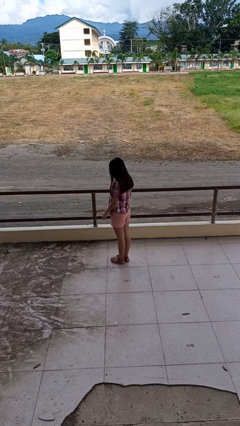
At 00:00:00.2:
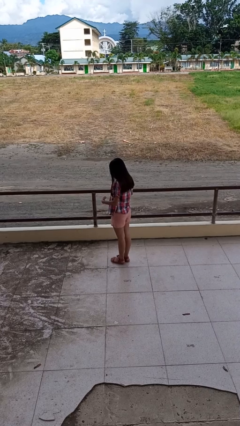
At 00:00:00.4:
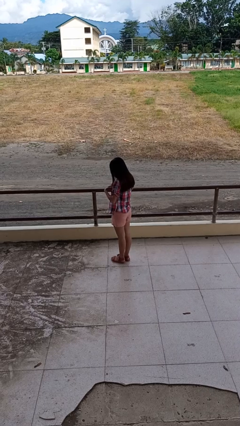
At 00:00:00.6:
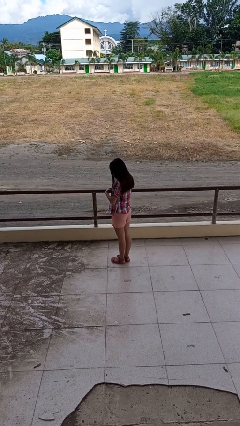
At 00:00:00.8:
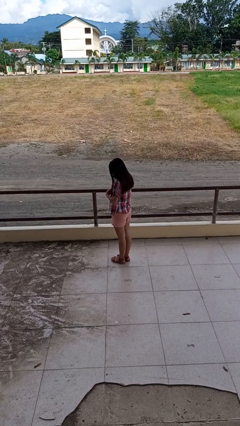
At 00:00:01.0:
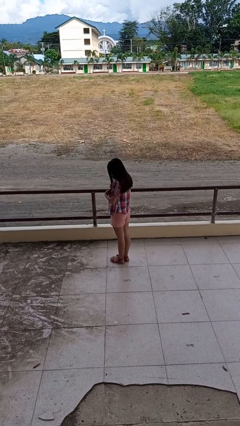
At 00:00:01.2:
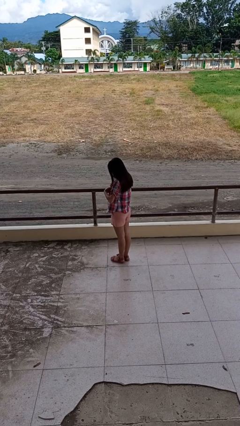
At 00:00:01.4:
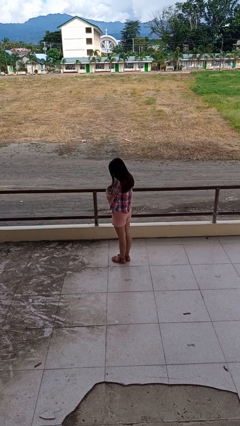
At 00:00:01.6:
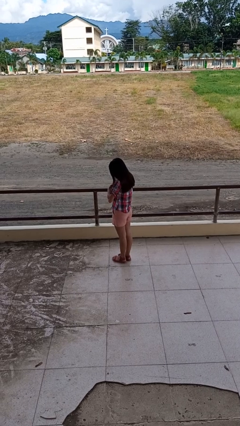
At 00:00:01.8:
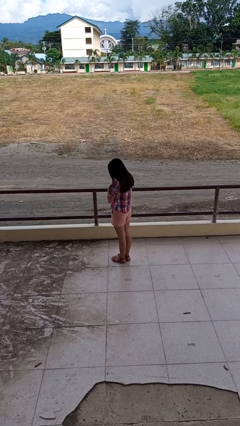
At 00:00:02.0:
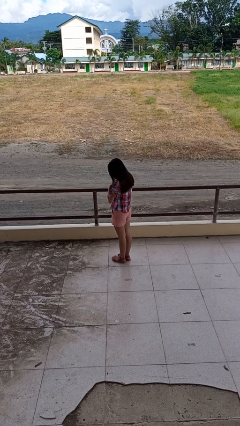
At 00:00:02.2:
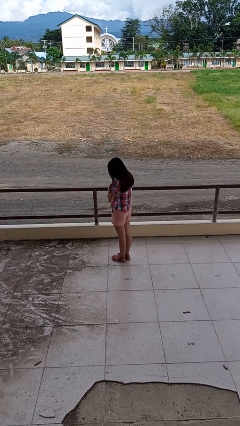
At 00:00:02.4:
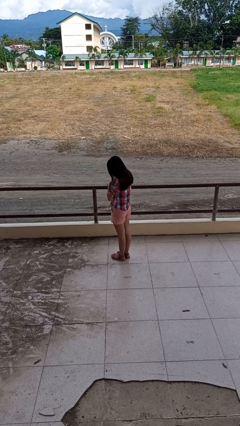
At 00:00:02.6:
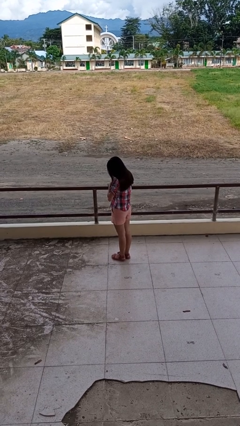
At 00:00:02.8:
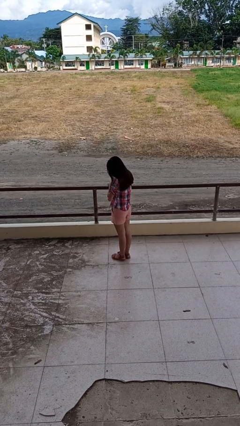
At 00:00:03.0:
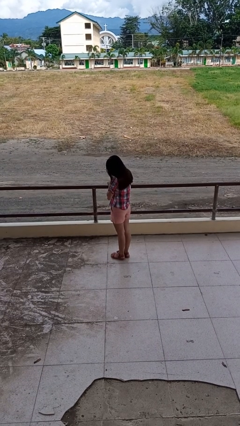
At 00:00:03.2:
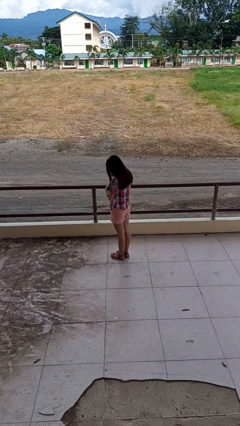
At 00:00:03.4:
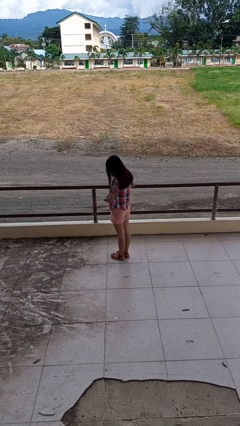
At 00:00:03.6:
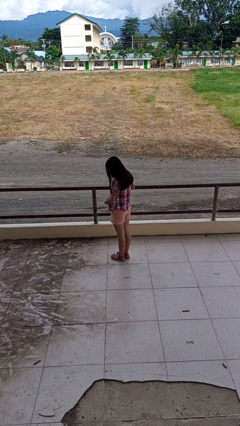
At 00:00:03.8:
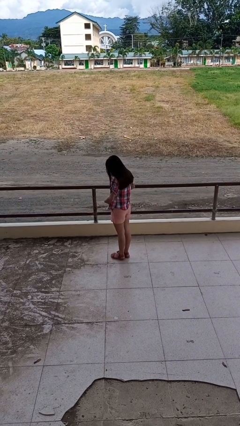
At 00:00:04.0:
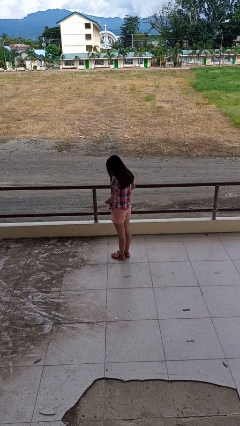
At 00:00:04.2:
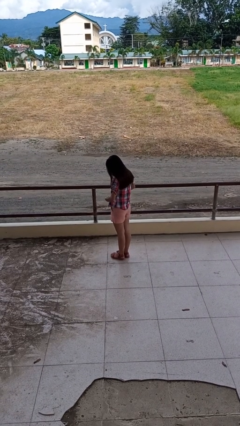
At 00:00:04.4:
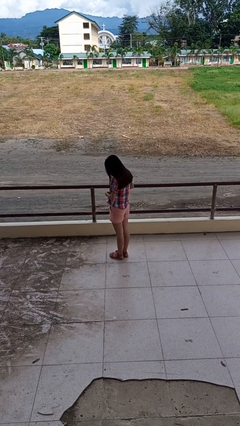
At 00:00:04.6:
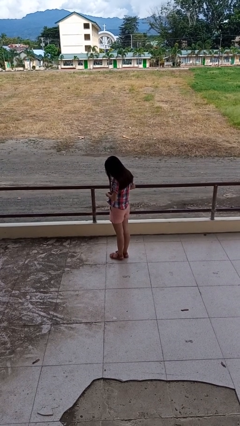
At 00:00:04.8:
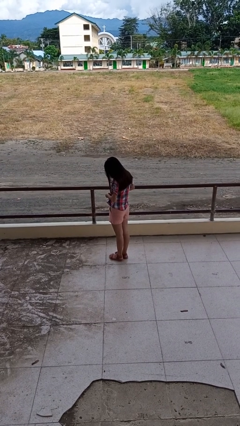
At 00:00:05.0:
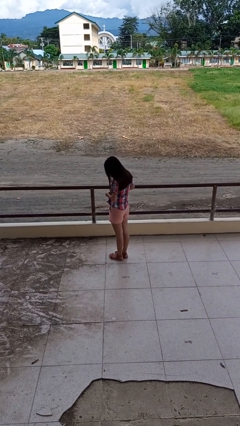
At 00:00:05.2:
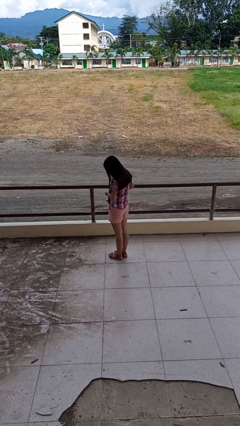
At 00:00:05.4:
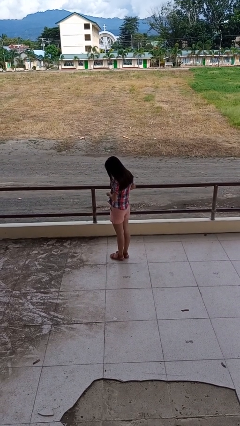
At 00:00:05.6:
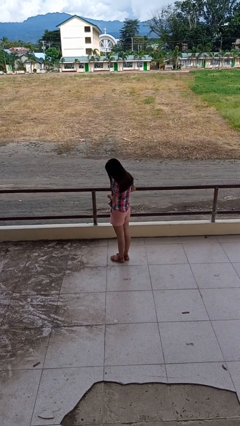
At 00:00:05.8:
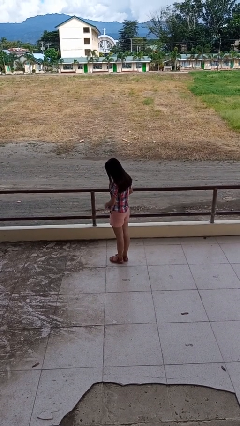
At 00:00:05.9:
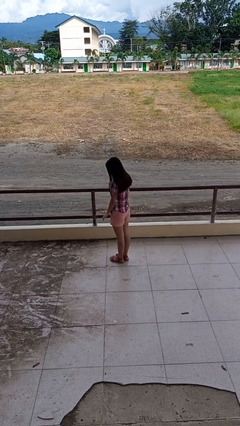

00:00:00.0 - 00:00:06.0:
person buttons shirt

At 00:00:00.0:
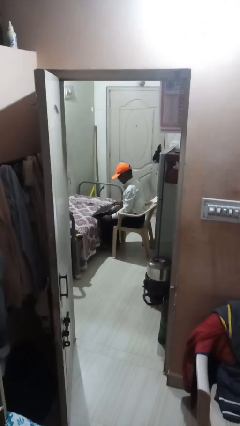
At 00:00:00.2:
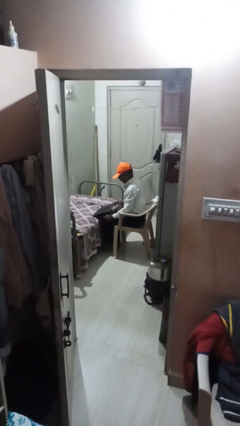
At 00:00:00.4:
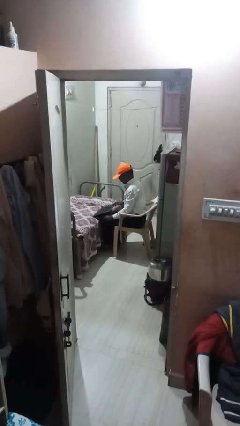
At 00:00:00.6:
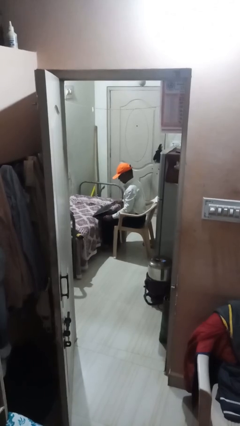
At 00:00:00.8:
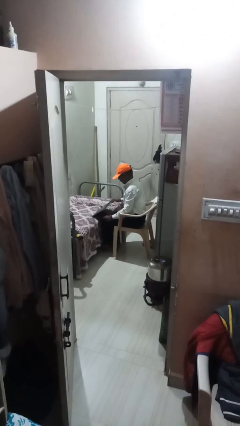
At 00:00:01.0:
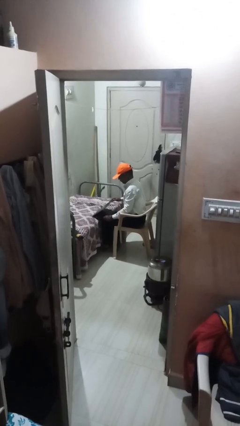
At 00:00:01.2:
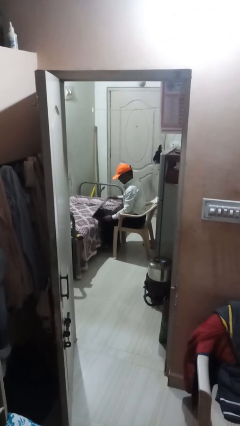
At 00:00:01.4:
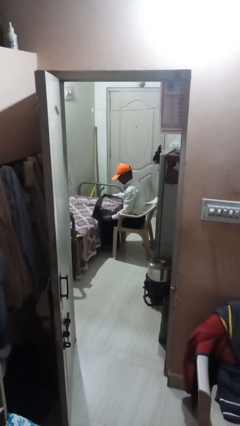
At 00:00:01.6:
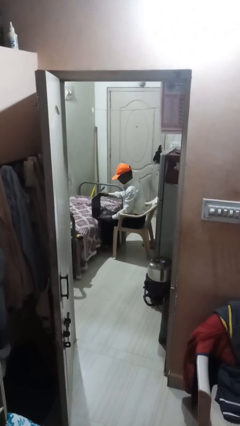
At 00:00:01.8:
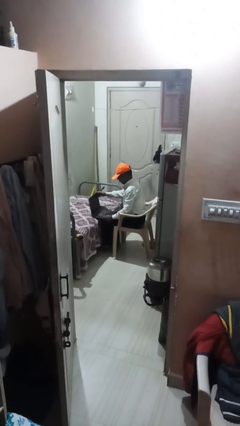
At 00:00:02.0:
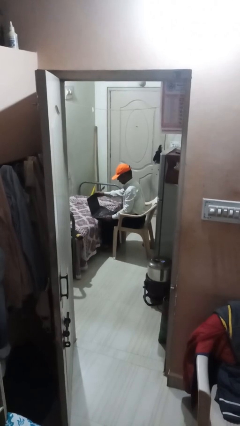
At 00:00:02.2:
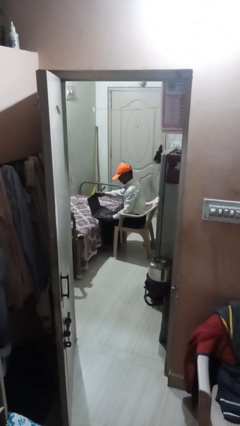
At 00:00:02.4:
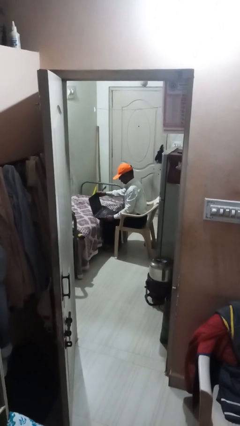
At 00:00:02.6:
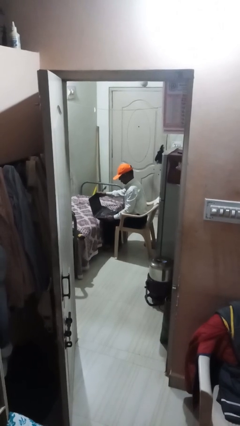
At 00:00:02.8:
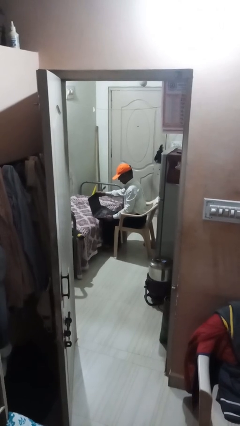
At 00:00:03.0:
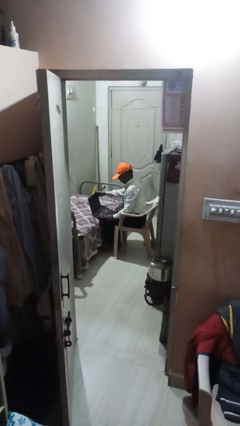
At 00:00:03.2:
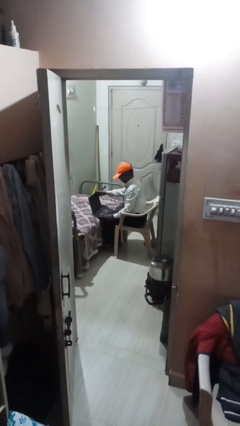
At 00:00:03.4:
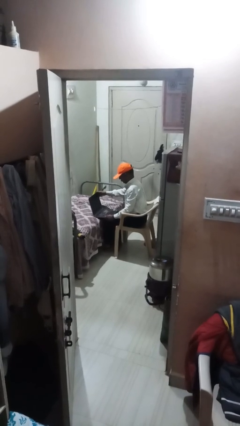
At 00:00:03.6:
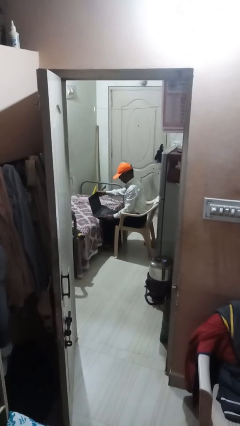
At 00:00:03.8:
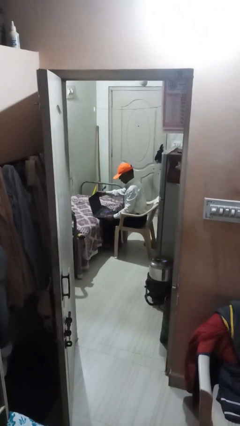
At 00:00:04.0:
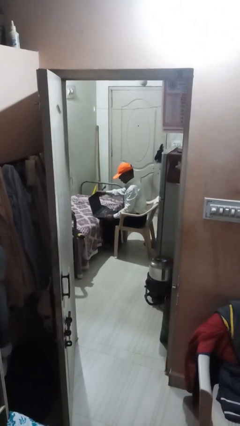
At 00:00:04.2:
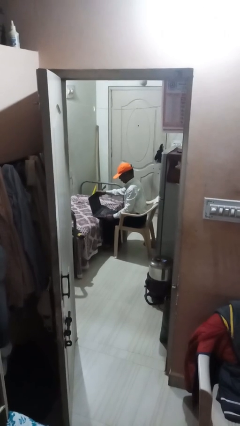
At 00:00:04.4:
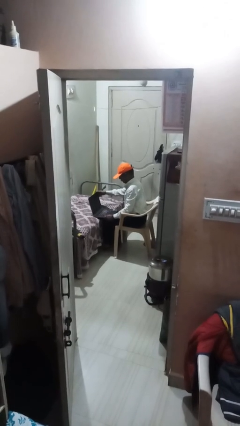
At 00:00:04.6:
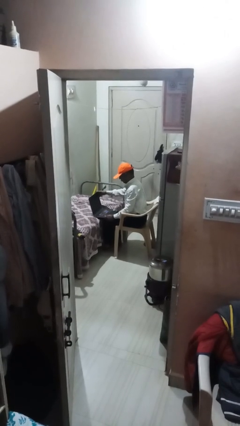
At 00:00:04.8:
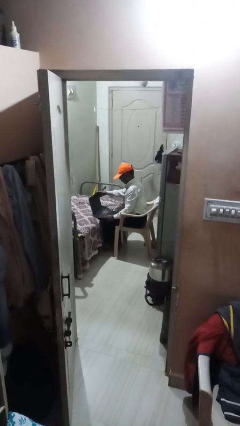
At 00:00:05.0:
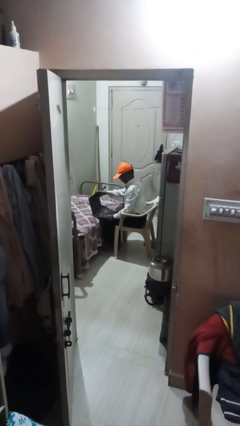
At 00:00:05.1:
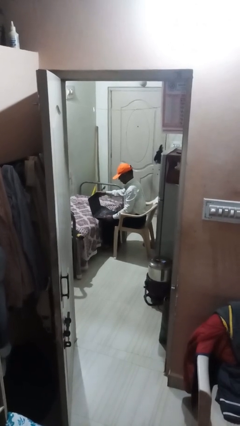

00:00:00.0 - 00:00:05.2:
person interacts with laptop

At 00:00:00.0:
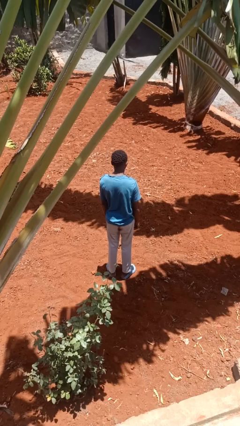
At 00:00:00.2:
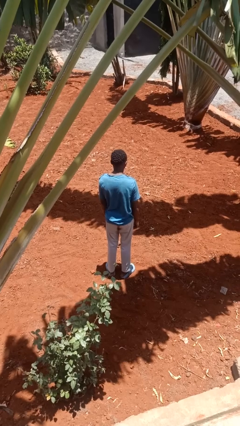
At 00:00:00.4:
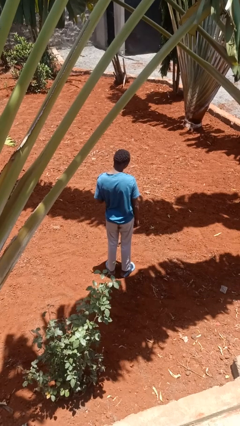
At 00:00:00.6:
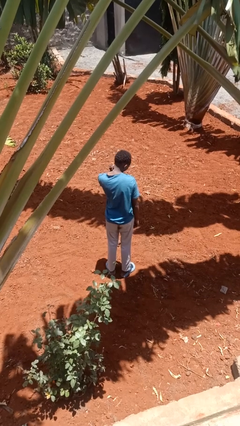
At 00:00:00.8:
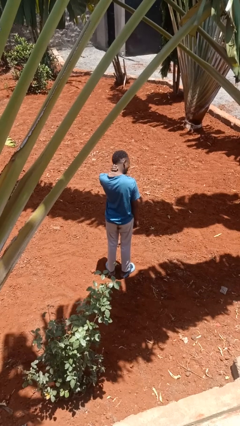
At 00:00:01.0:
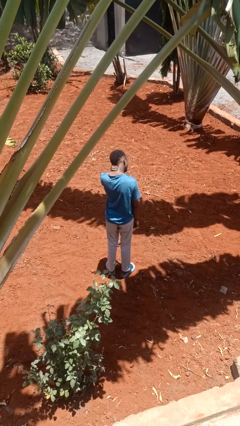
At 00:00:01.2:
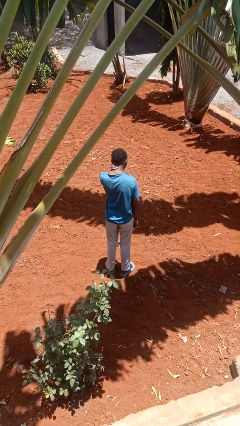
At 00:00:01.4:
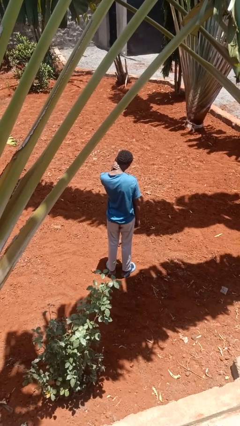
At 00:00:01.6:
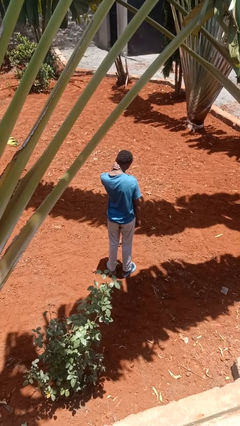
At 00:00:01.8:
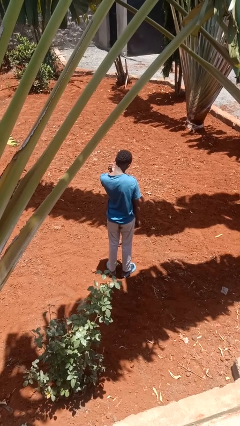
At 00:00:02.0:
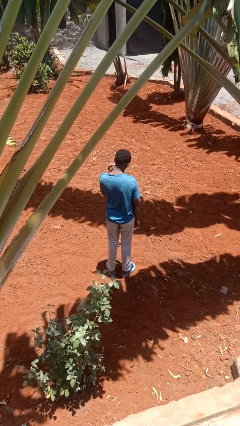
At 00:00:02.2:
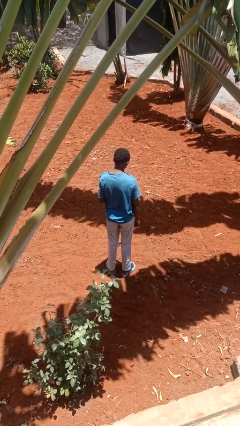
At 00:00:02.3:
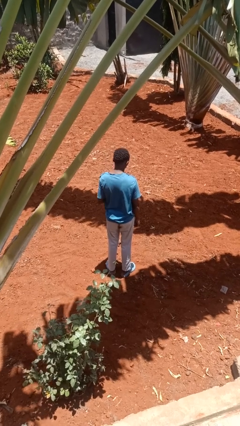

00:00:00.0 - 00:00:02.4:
person rubs neck

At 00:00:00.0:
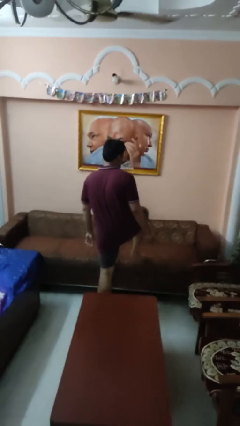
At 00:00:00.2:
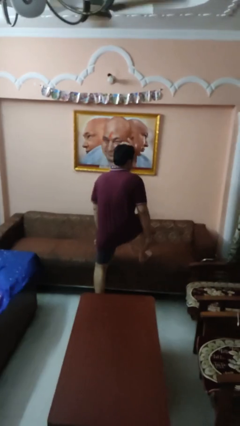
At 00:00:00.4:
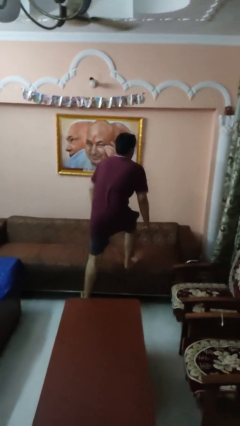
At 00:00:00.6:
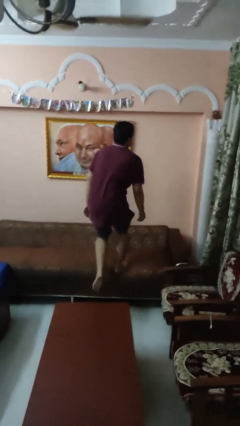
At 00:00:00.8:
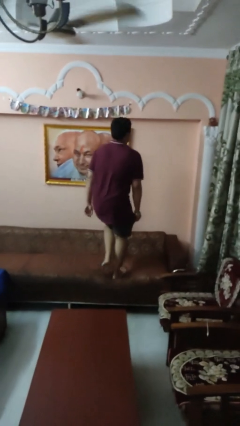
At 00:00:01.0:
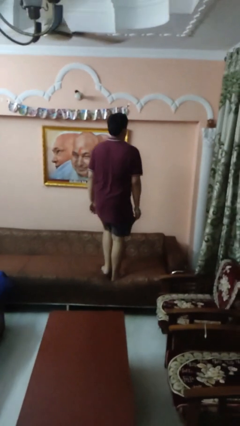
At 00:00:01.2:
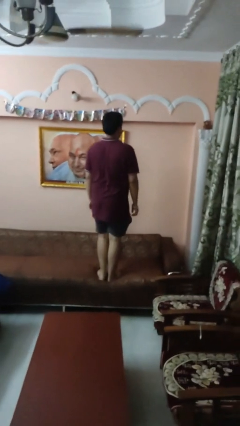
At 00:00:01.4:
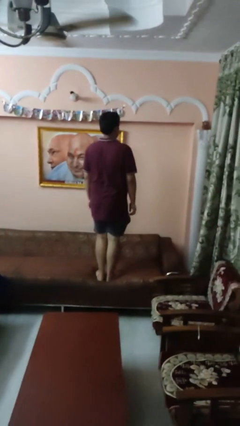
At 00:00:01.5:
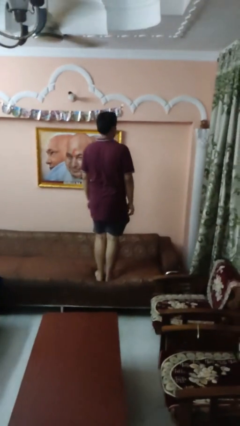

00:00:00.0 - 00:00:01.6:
person climbs on couch

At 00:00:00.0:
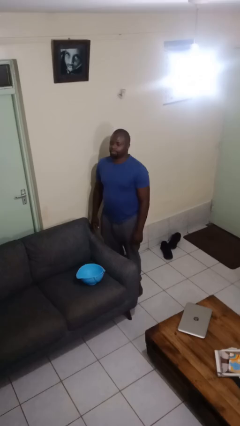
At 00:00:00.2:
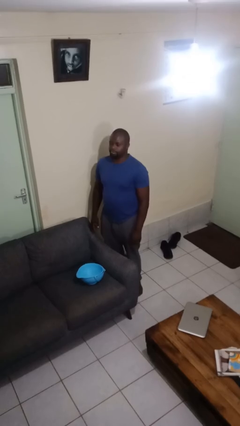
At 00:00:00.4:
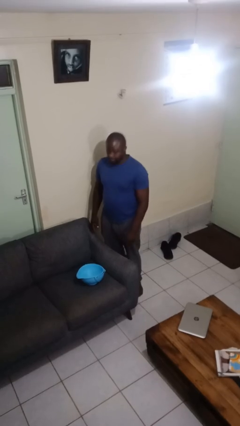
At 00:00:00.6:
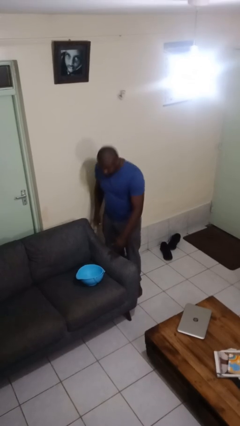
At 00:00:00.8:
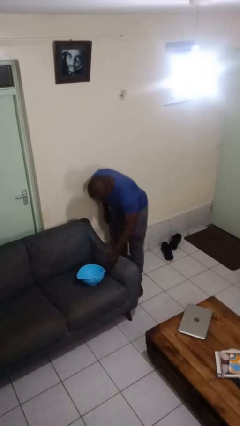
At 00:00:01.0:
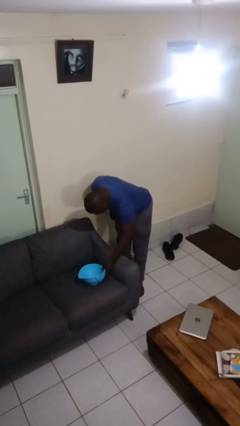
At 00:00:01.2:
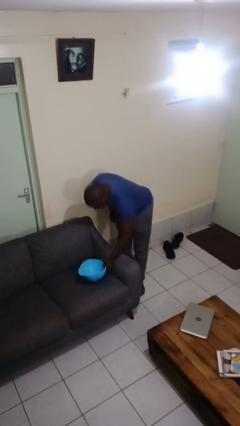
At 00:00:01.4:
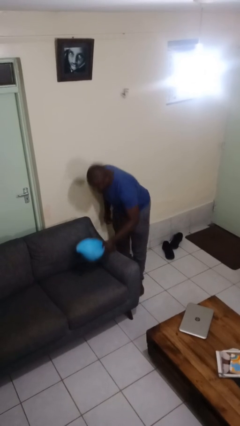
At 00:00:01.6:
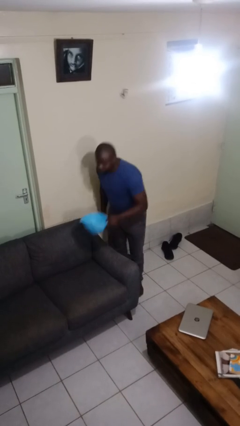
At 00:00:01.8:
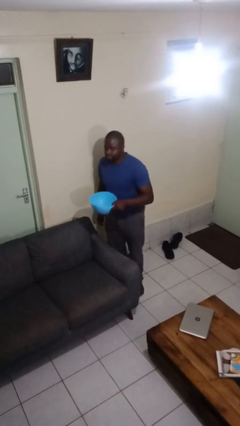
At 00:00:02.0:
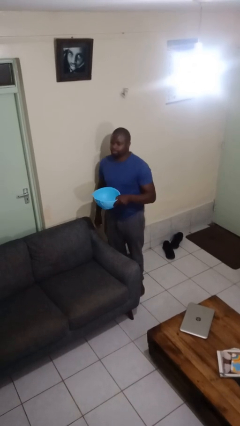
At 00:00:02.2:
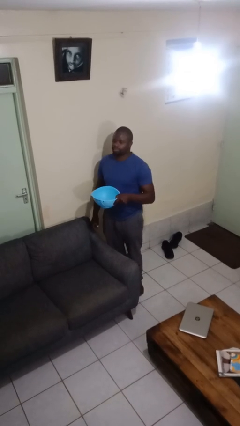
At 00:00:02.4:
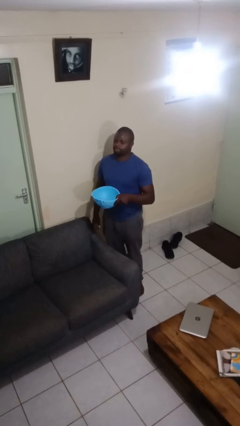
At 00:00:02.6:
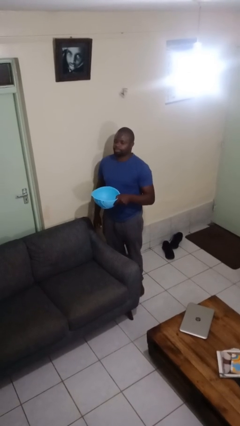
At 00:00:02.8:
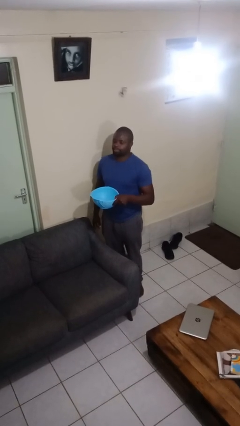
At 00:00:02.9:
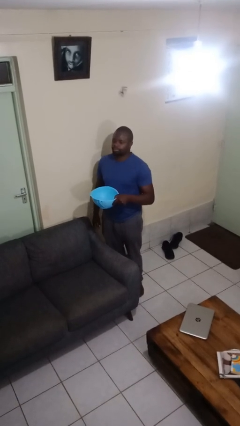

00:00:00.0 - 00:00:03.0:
person picks up object from couch
